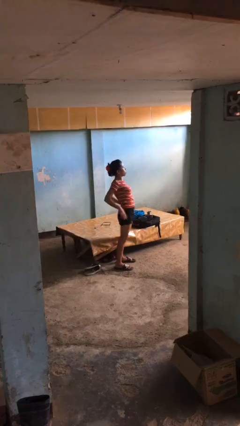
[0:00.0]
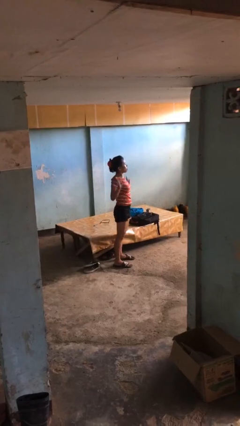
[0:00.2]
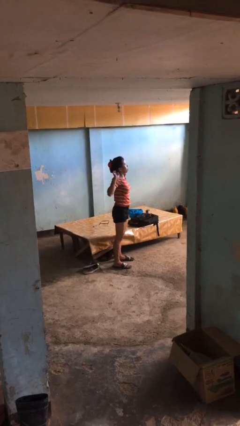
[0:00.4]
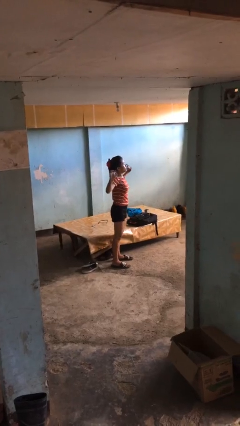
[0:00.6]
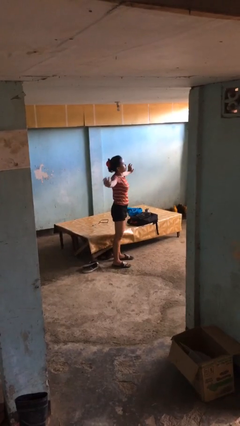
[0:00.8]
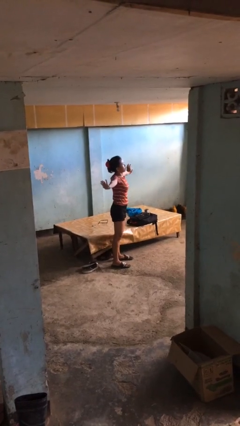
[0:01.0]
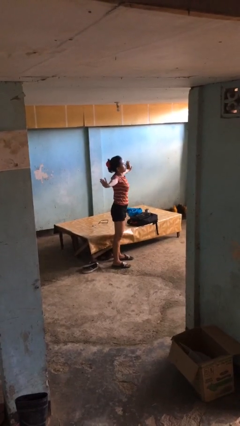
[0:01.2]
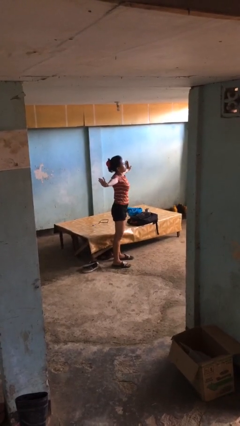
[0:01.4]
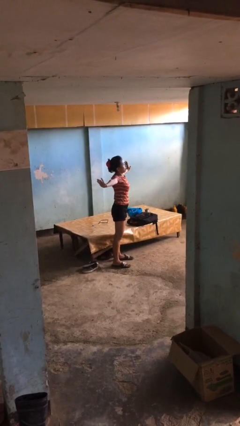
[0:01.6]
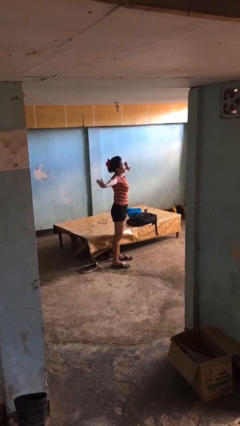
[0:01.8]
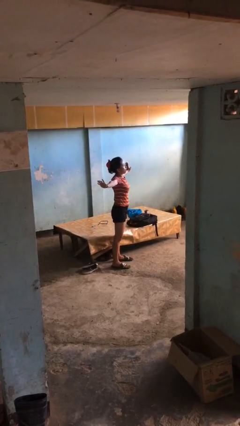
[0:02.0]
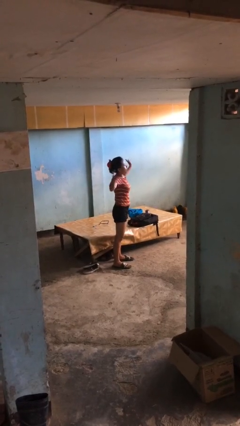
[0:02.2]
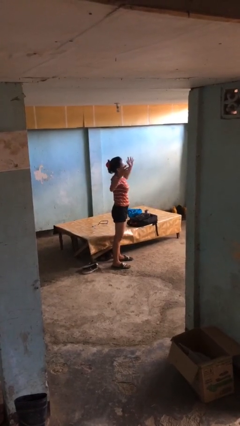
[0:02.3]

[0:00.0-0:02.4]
person stretches arms to side

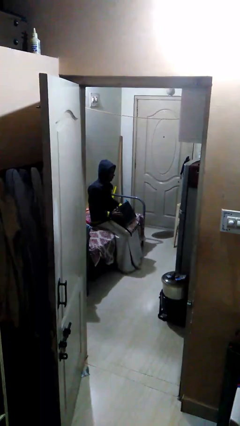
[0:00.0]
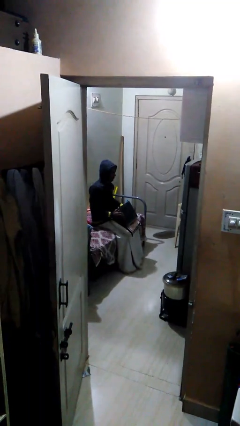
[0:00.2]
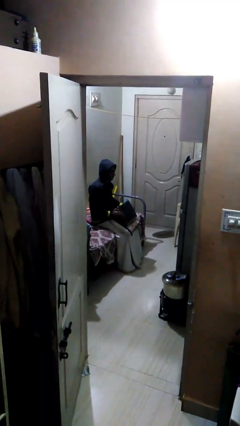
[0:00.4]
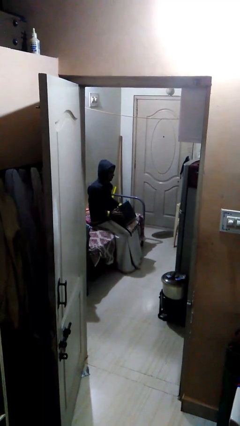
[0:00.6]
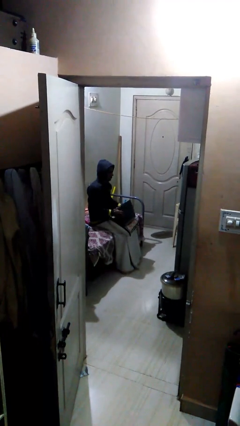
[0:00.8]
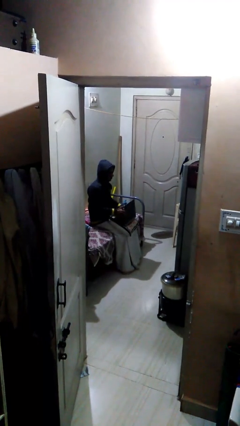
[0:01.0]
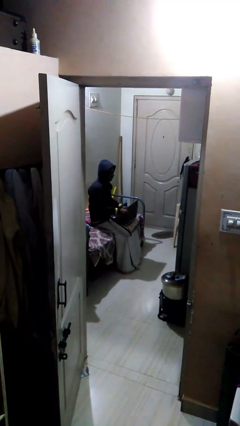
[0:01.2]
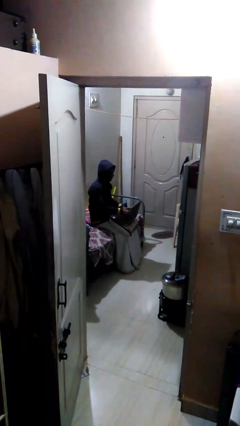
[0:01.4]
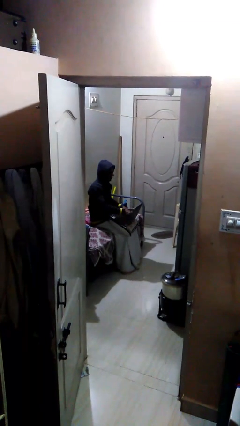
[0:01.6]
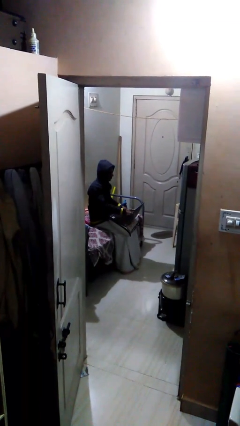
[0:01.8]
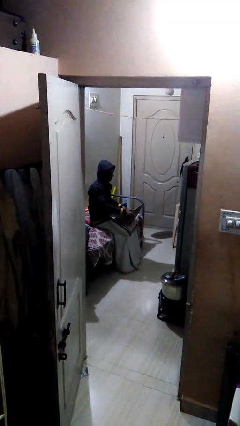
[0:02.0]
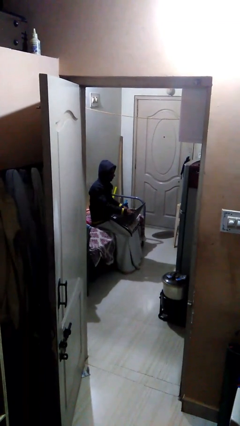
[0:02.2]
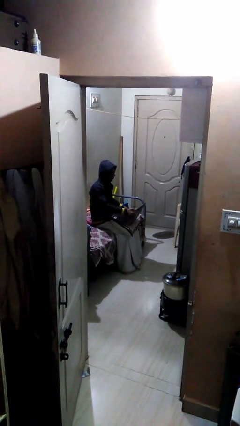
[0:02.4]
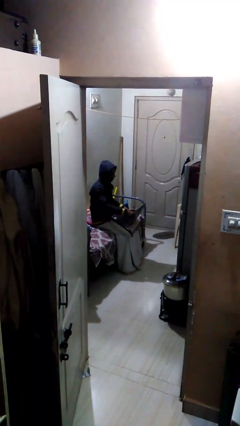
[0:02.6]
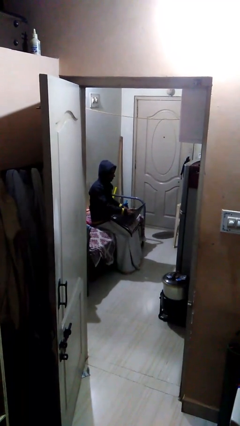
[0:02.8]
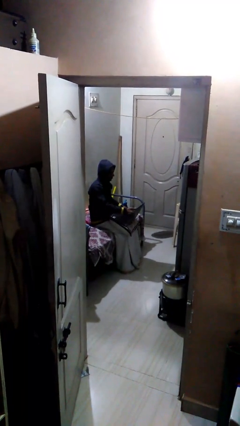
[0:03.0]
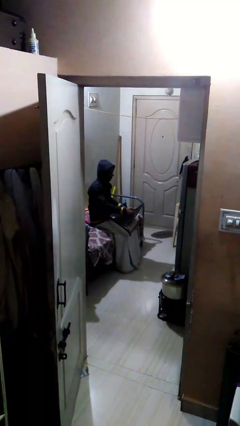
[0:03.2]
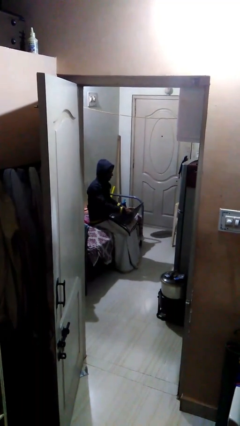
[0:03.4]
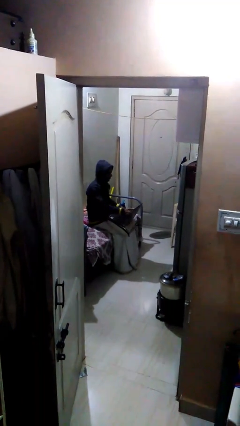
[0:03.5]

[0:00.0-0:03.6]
person interacts with laptop

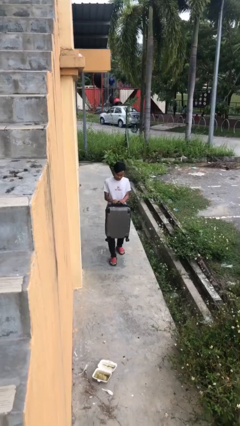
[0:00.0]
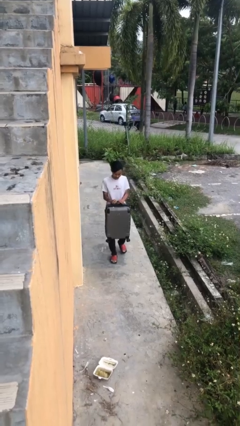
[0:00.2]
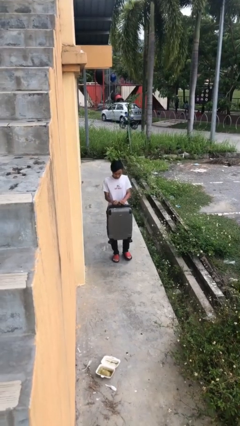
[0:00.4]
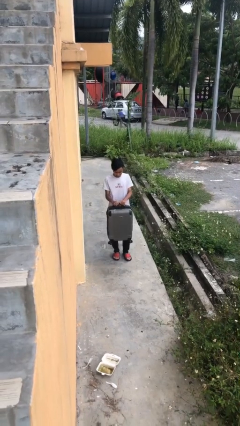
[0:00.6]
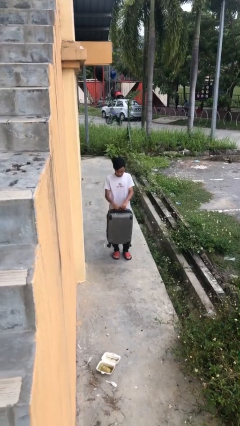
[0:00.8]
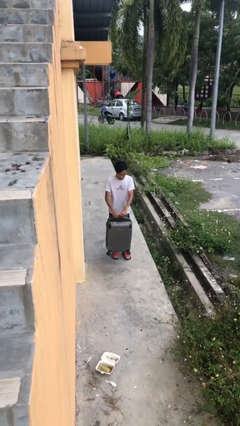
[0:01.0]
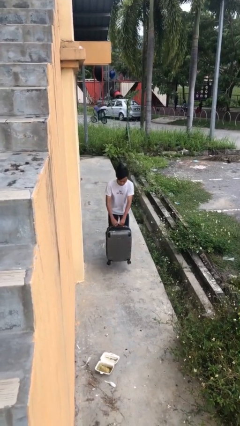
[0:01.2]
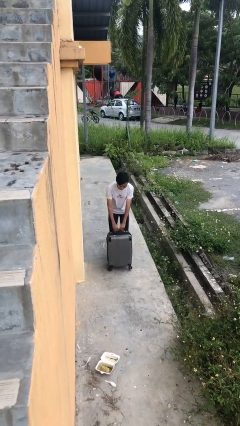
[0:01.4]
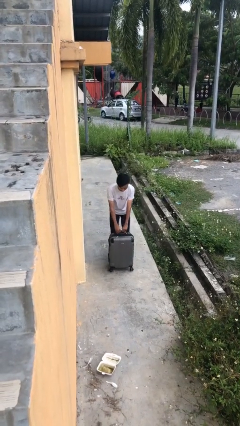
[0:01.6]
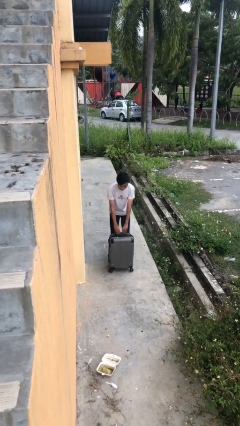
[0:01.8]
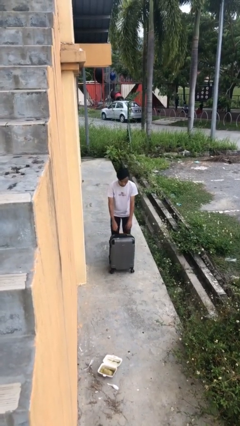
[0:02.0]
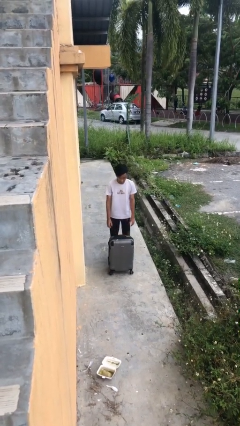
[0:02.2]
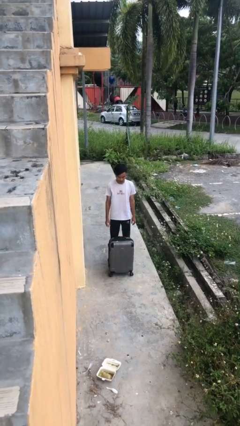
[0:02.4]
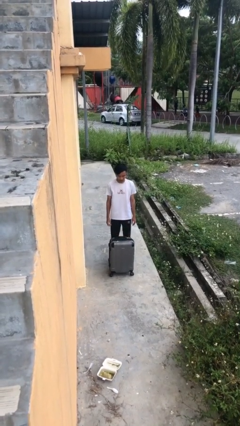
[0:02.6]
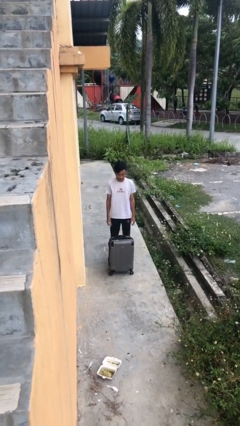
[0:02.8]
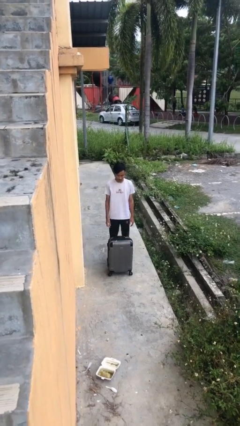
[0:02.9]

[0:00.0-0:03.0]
person puts down object on floor

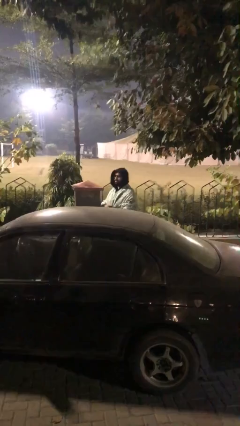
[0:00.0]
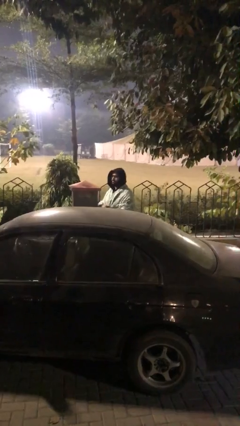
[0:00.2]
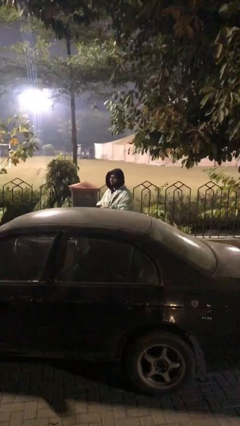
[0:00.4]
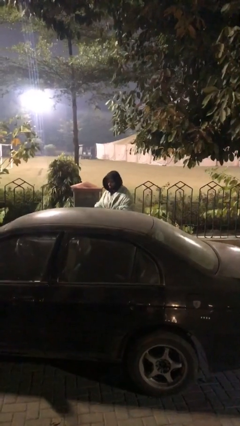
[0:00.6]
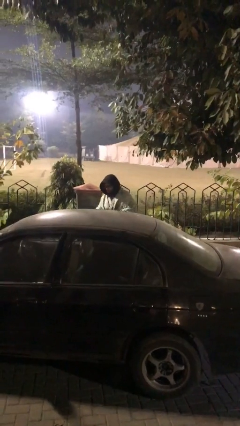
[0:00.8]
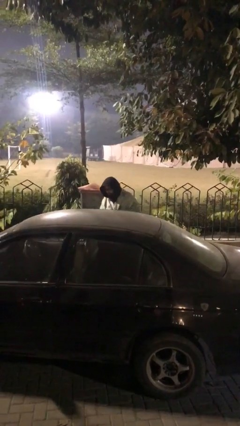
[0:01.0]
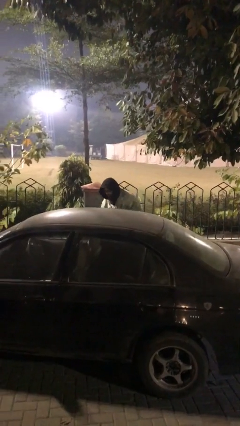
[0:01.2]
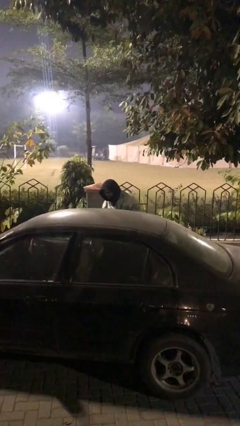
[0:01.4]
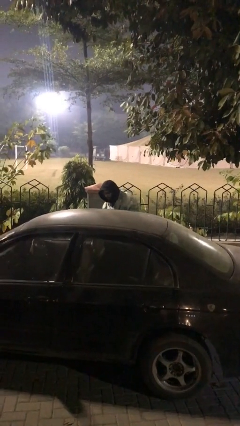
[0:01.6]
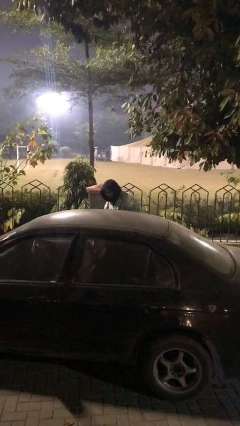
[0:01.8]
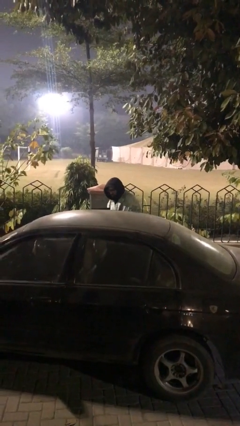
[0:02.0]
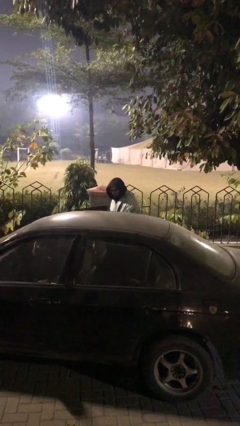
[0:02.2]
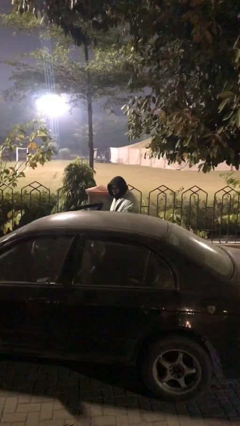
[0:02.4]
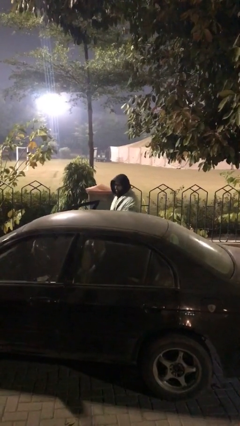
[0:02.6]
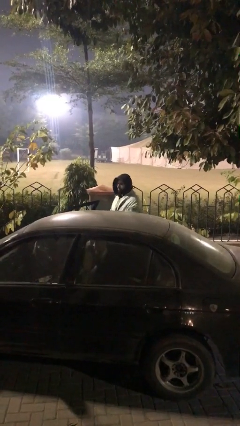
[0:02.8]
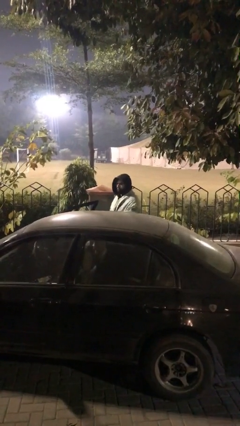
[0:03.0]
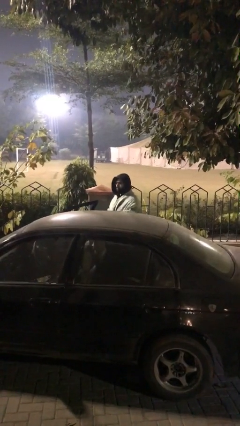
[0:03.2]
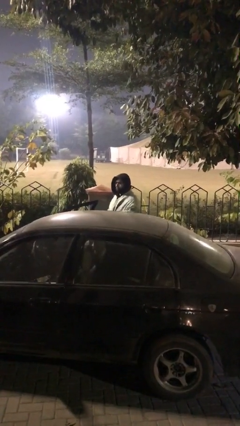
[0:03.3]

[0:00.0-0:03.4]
person opens car door

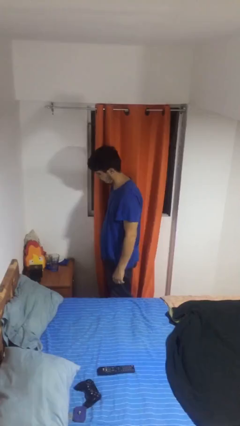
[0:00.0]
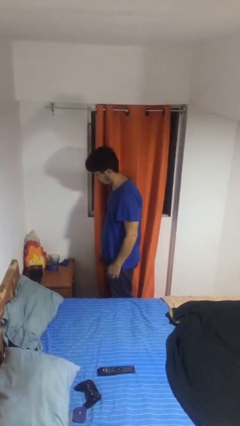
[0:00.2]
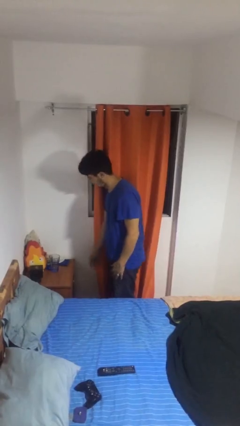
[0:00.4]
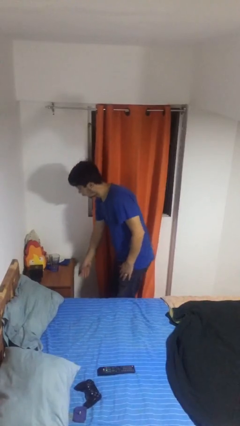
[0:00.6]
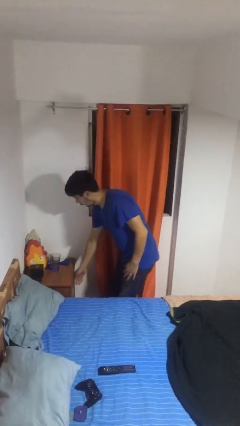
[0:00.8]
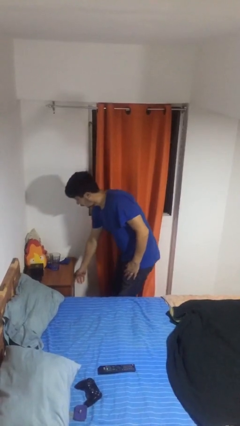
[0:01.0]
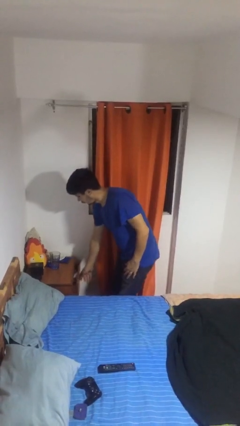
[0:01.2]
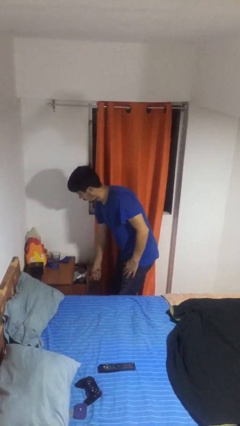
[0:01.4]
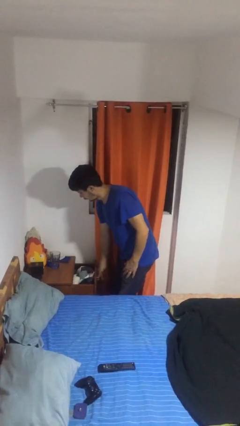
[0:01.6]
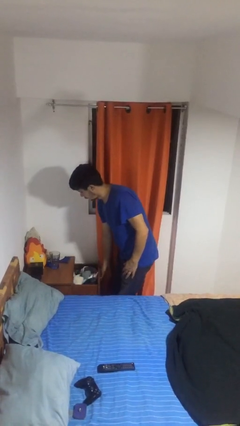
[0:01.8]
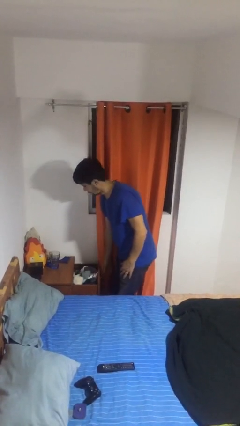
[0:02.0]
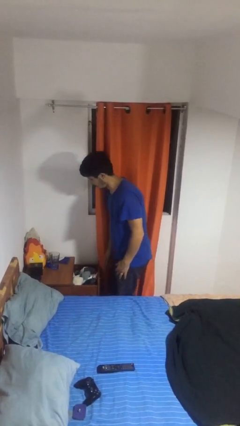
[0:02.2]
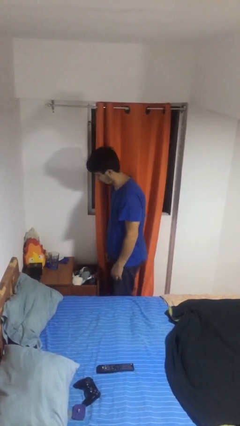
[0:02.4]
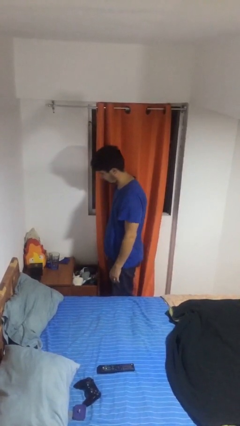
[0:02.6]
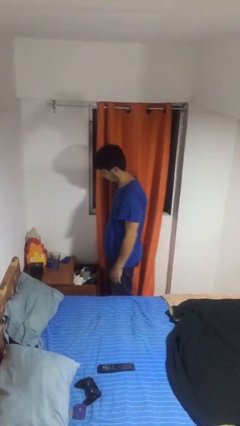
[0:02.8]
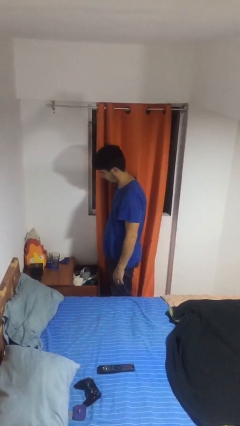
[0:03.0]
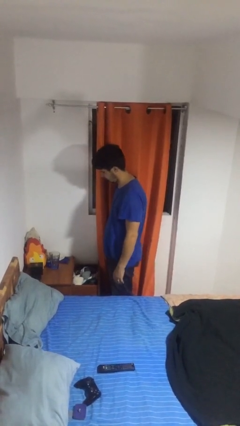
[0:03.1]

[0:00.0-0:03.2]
person opens dresser drawer

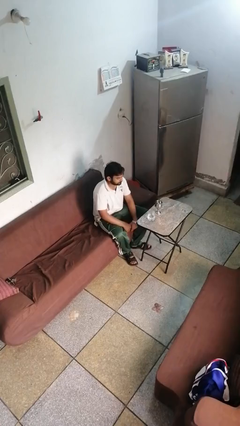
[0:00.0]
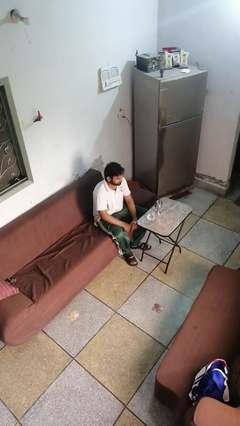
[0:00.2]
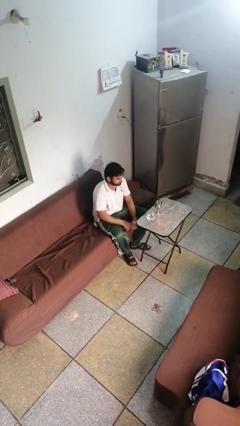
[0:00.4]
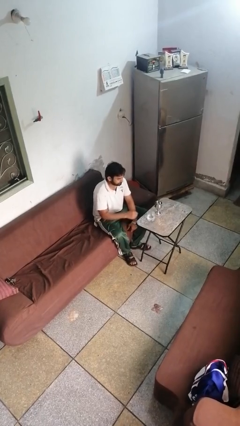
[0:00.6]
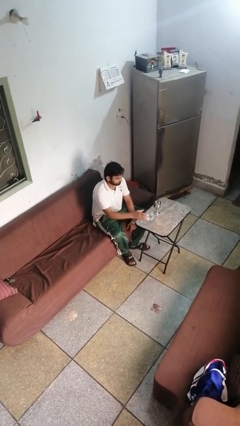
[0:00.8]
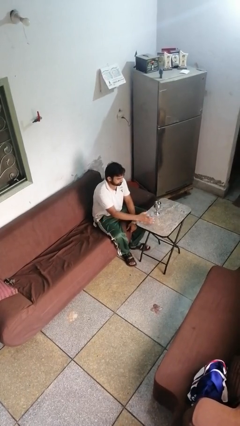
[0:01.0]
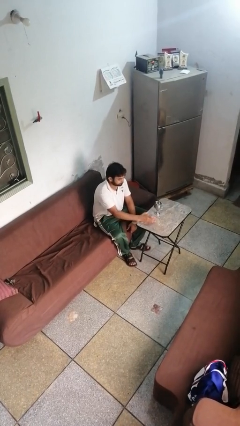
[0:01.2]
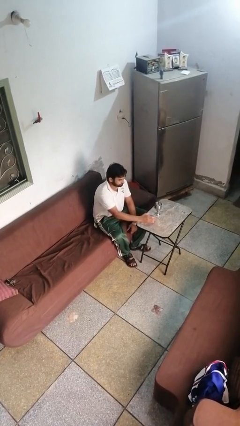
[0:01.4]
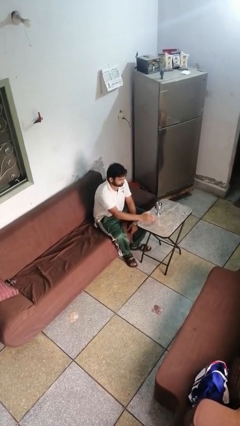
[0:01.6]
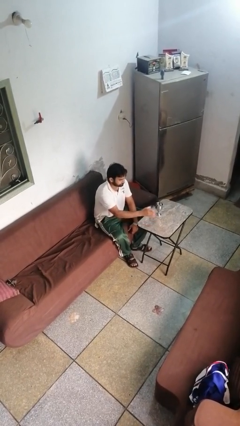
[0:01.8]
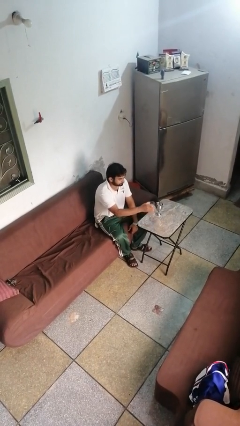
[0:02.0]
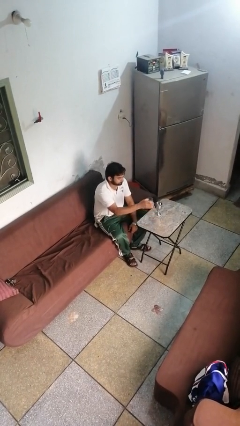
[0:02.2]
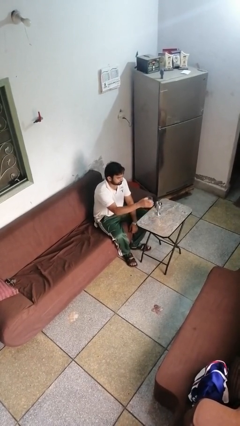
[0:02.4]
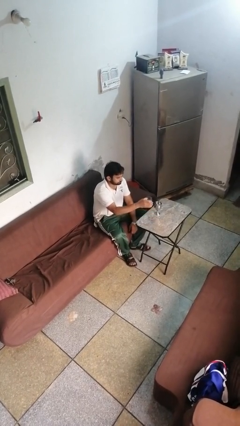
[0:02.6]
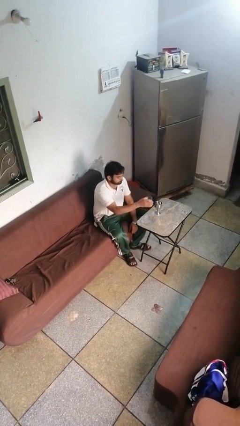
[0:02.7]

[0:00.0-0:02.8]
person picks up object from table
